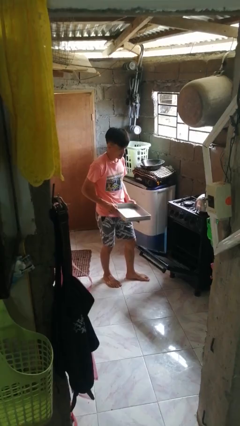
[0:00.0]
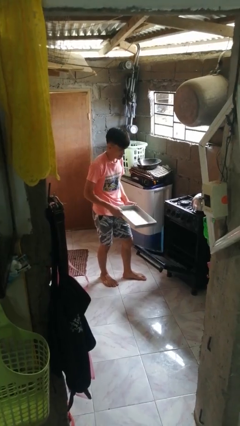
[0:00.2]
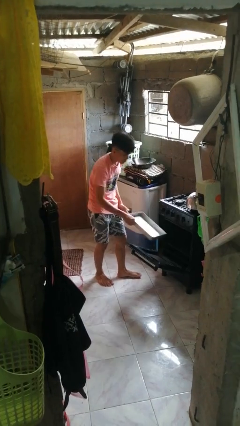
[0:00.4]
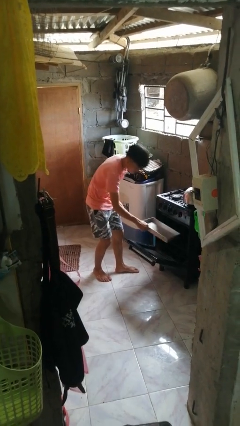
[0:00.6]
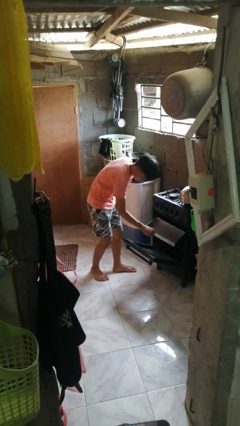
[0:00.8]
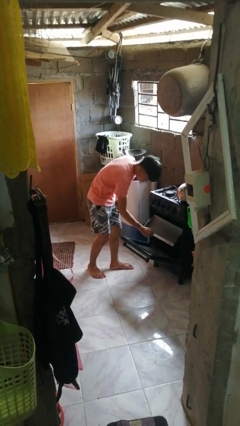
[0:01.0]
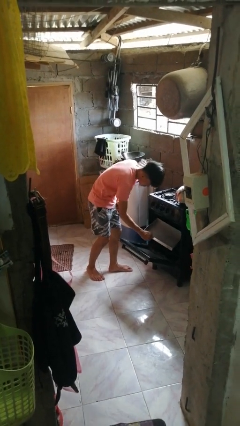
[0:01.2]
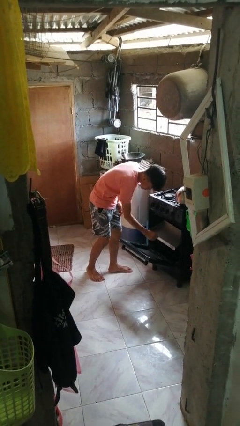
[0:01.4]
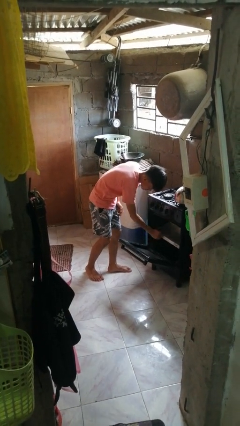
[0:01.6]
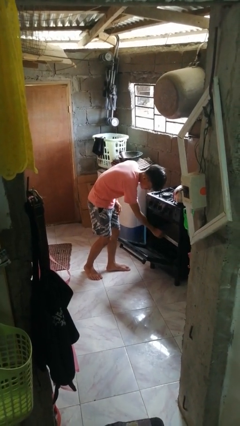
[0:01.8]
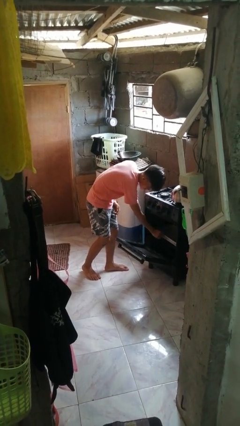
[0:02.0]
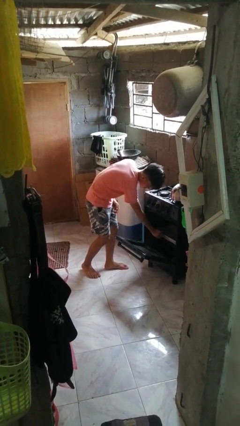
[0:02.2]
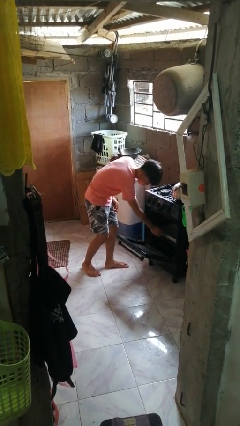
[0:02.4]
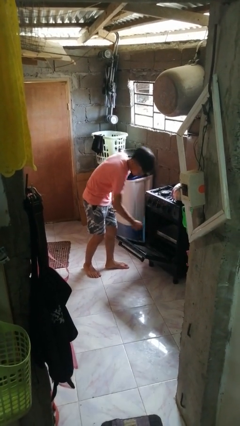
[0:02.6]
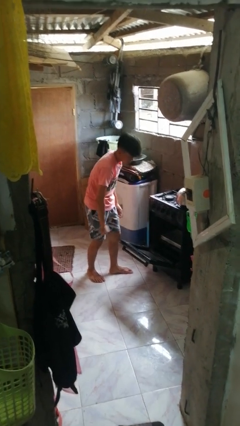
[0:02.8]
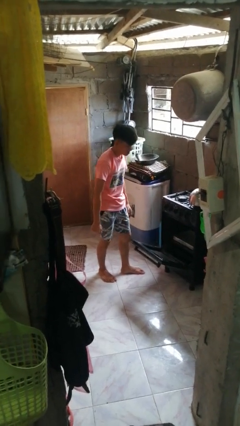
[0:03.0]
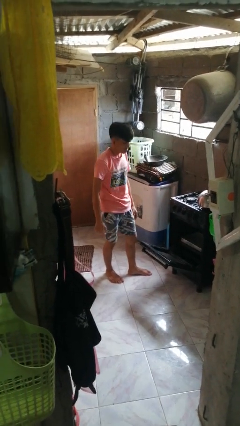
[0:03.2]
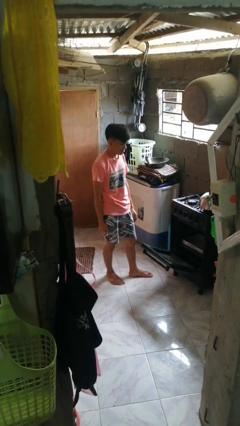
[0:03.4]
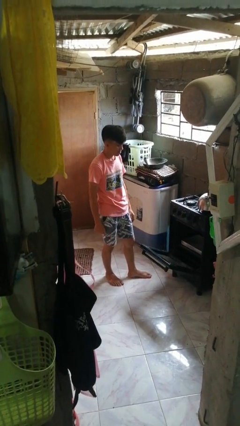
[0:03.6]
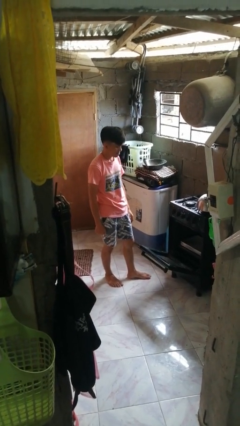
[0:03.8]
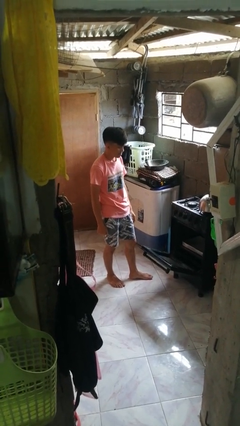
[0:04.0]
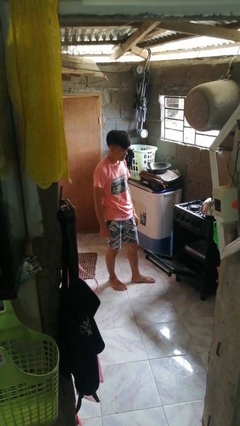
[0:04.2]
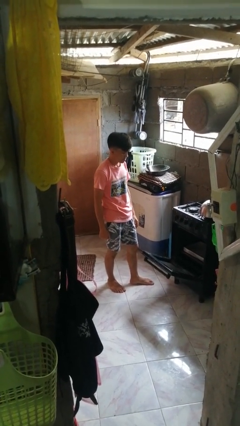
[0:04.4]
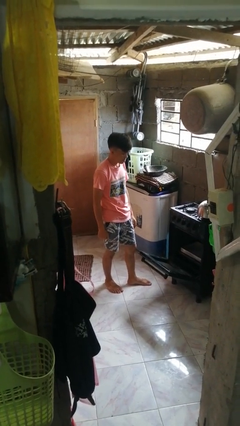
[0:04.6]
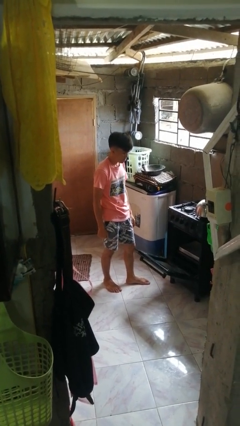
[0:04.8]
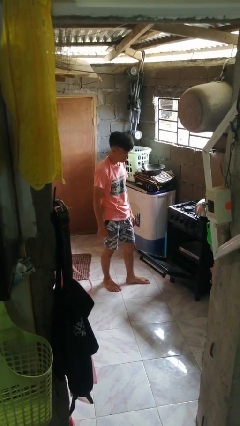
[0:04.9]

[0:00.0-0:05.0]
person puts object into oven

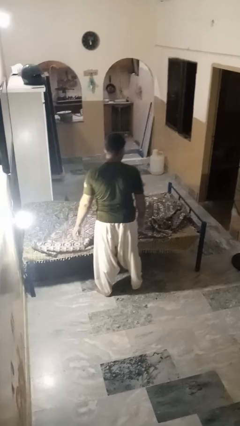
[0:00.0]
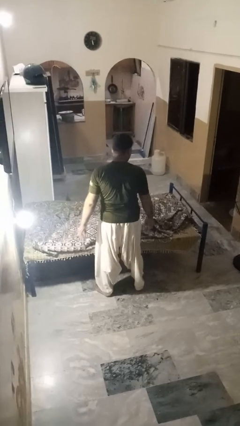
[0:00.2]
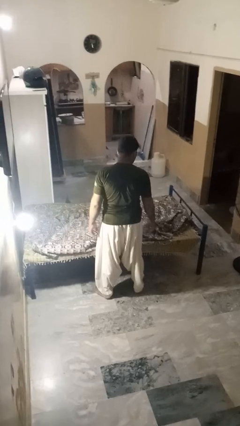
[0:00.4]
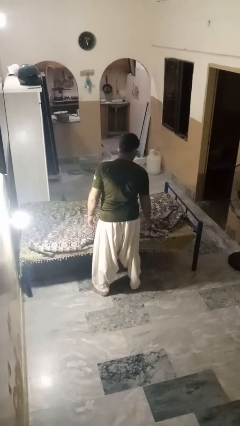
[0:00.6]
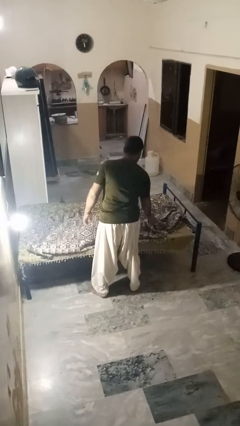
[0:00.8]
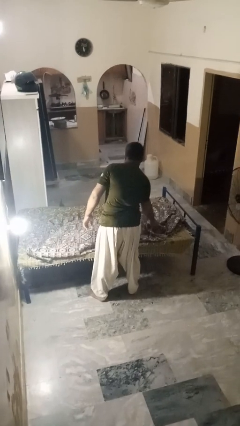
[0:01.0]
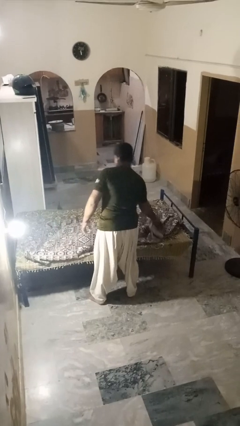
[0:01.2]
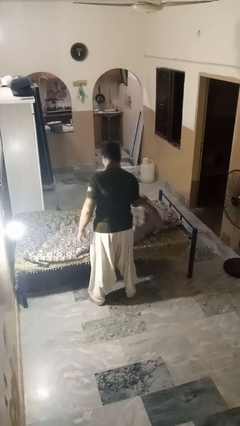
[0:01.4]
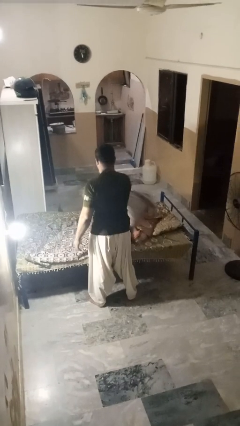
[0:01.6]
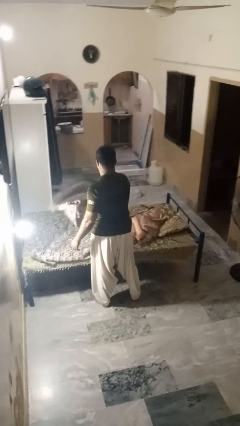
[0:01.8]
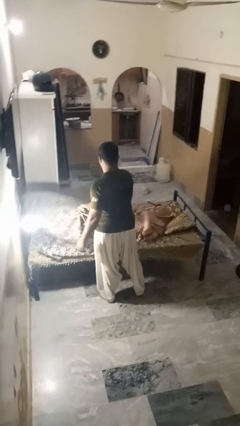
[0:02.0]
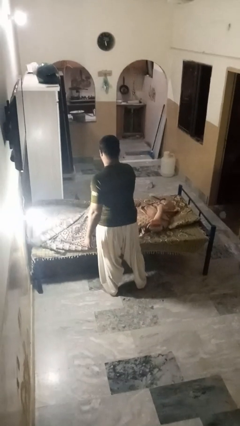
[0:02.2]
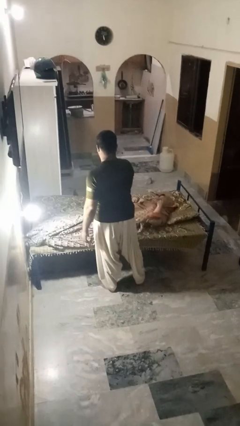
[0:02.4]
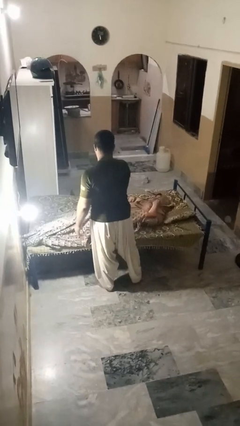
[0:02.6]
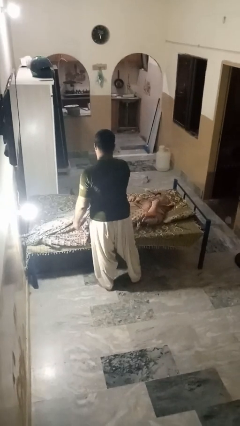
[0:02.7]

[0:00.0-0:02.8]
person uncovers friend with blanket

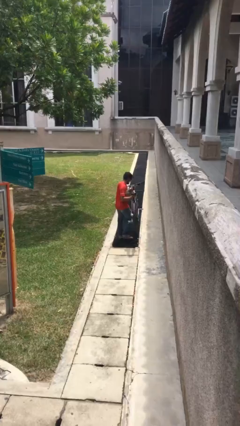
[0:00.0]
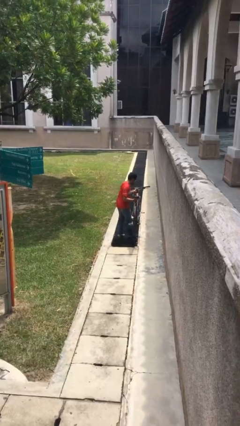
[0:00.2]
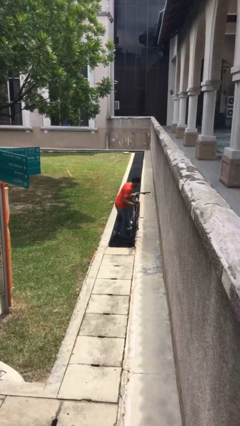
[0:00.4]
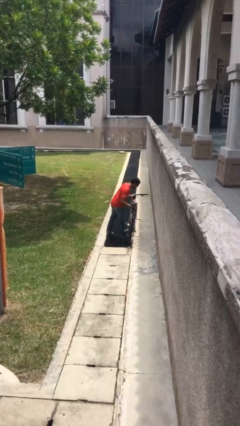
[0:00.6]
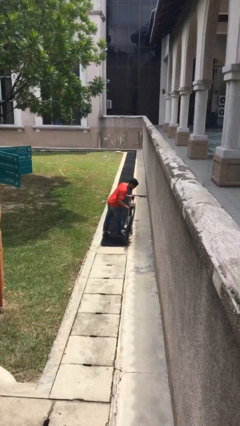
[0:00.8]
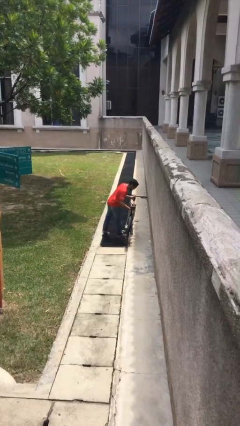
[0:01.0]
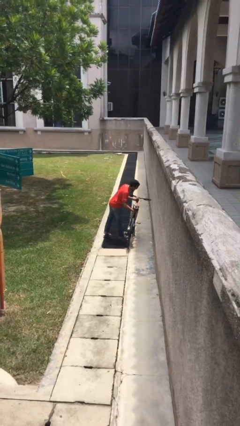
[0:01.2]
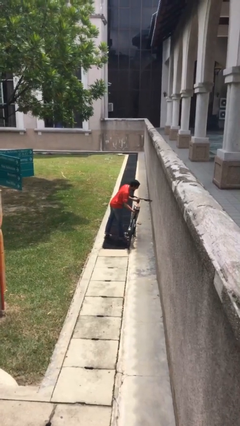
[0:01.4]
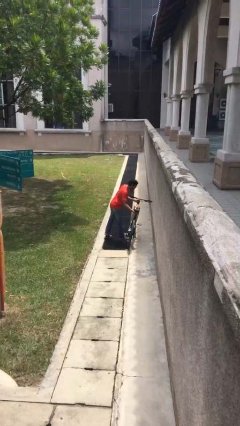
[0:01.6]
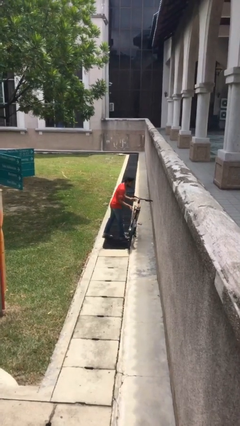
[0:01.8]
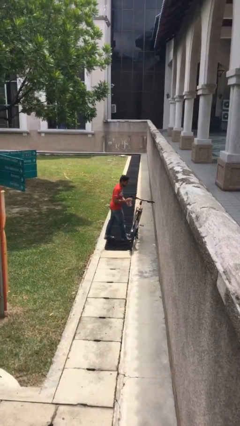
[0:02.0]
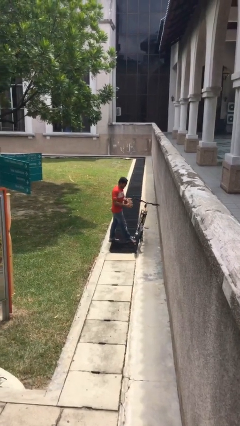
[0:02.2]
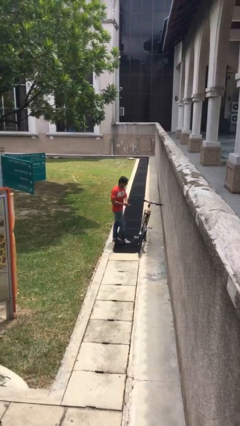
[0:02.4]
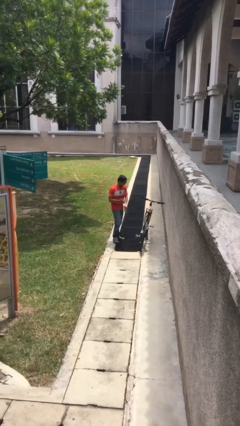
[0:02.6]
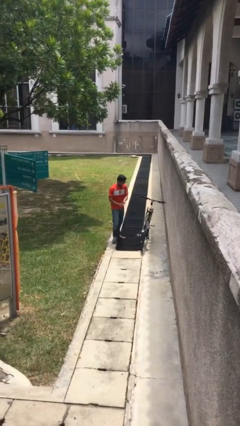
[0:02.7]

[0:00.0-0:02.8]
person puts down object on floor

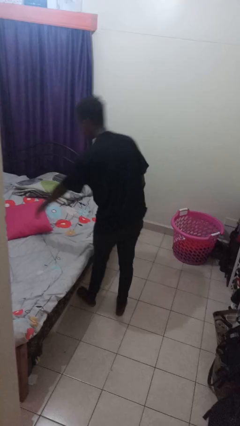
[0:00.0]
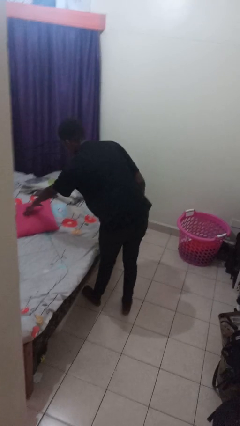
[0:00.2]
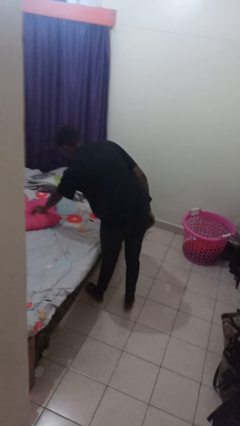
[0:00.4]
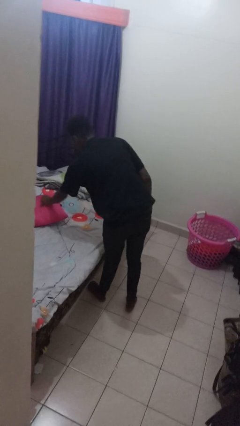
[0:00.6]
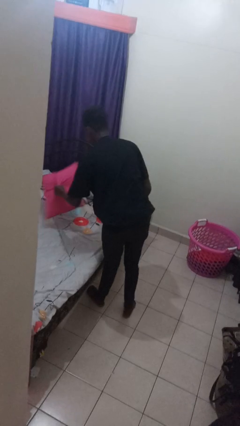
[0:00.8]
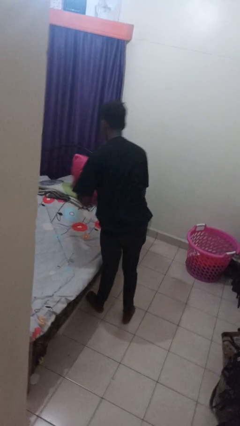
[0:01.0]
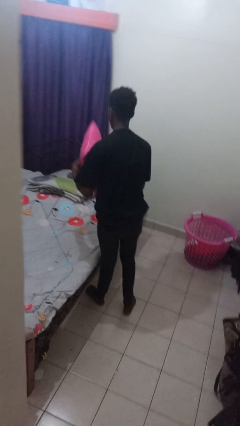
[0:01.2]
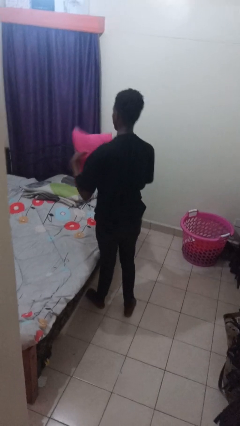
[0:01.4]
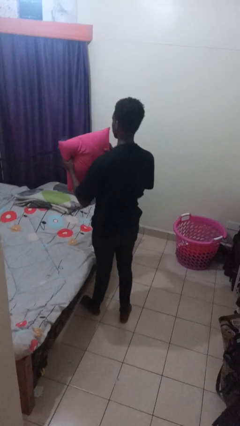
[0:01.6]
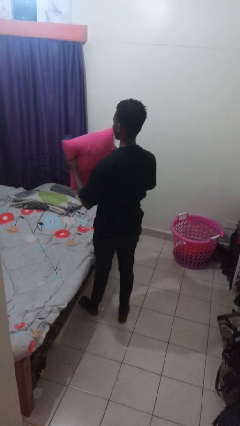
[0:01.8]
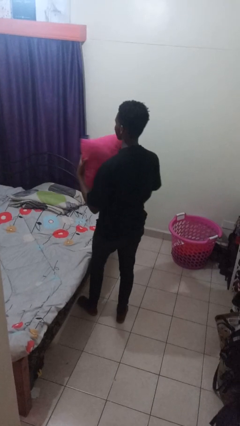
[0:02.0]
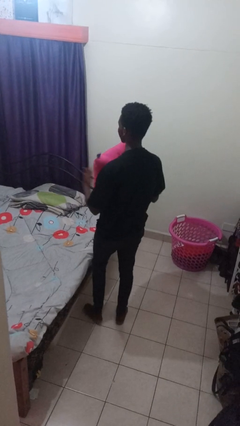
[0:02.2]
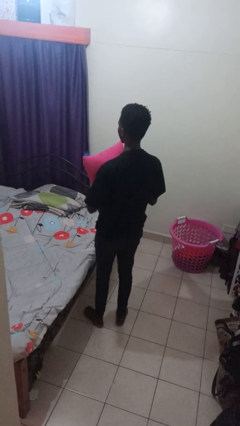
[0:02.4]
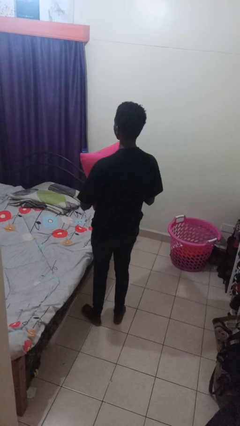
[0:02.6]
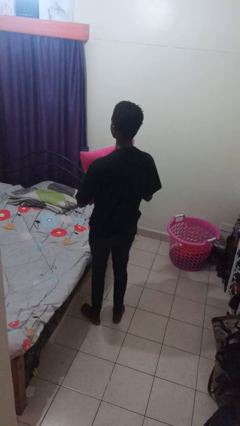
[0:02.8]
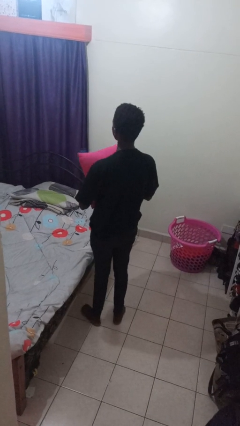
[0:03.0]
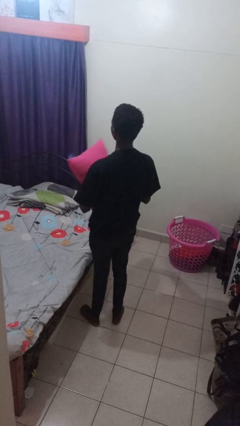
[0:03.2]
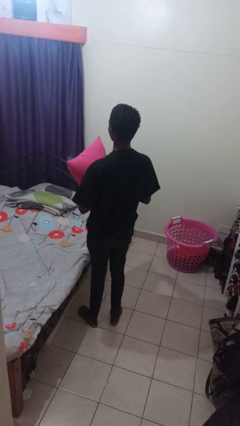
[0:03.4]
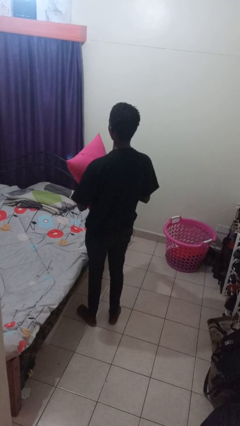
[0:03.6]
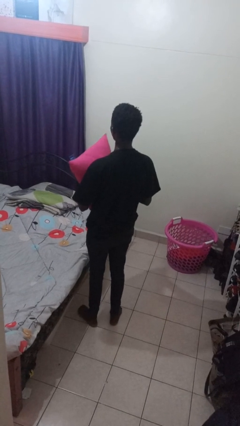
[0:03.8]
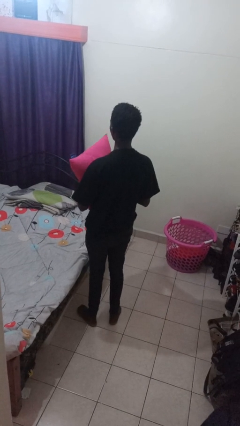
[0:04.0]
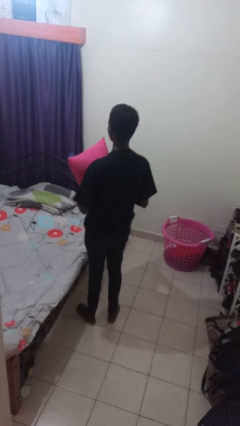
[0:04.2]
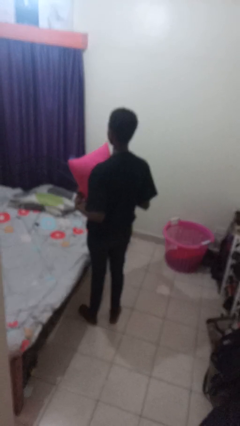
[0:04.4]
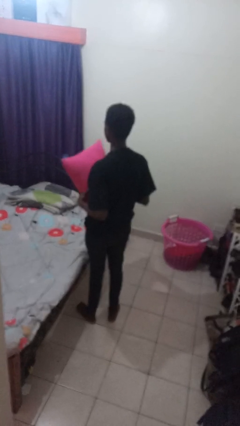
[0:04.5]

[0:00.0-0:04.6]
person picks up object from bed

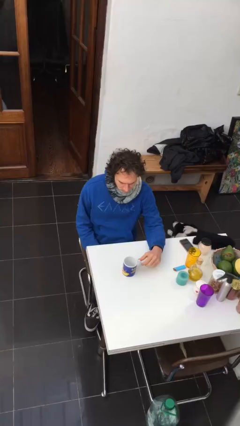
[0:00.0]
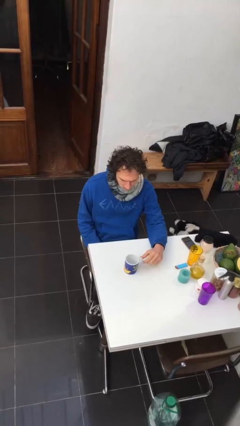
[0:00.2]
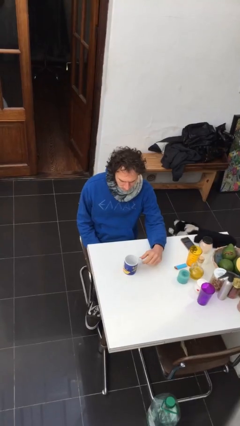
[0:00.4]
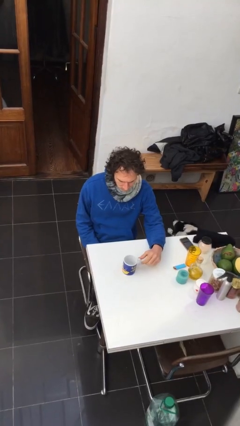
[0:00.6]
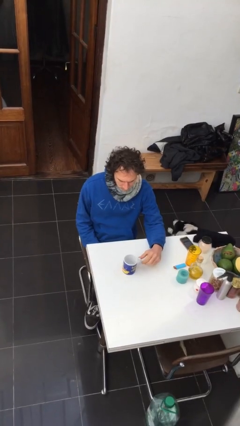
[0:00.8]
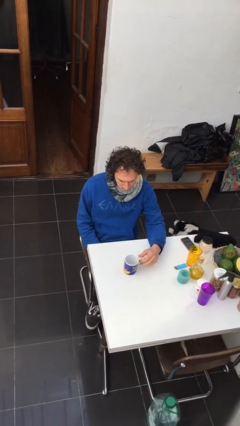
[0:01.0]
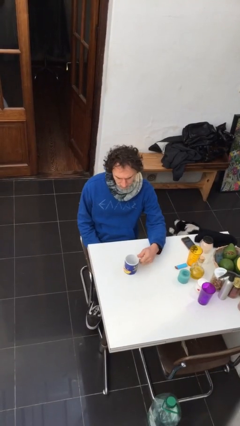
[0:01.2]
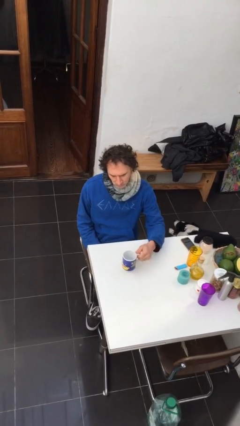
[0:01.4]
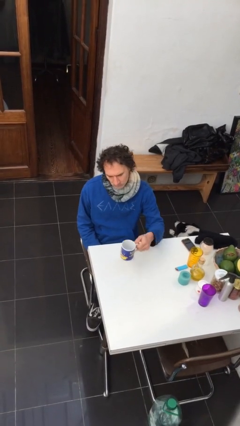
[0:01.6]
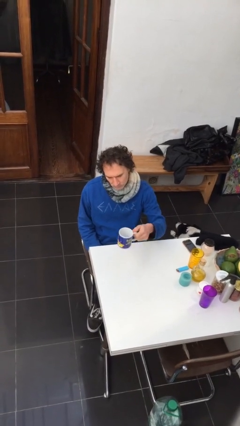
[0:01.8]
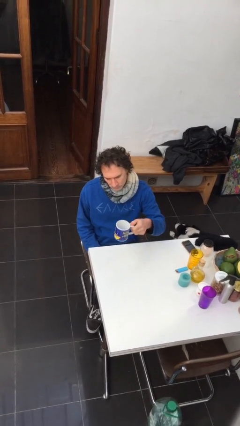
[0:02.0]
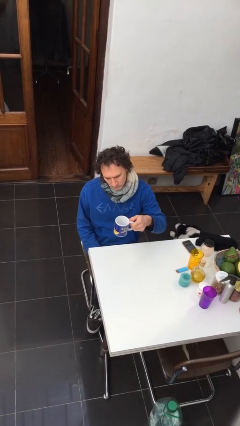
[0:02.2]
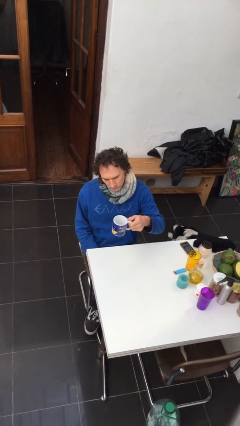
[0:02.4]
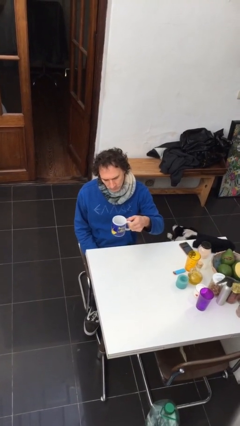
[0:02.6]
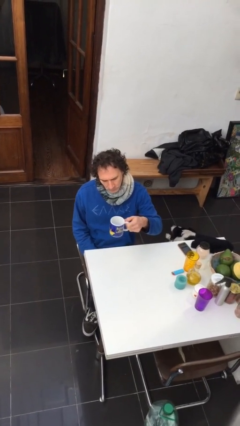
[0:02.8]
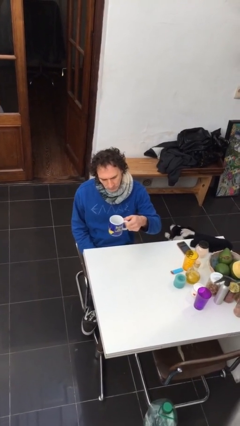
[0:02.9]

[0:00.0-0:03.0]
person picks up object from table
